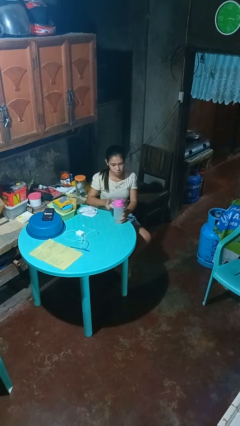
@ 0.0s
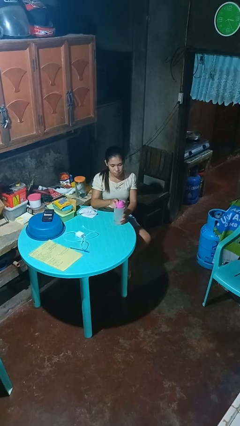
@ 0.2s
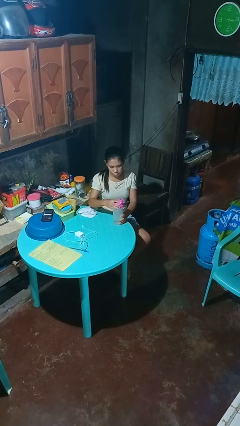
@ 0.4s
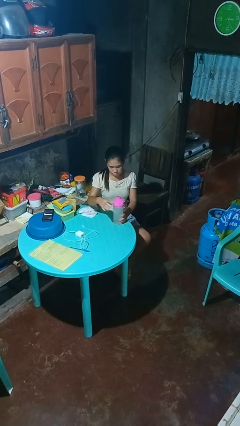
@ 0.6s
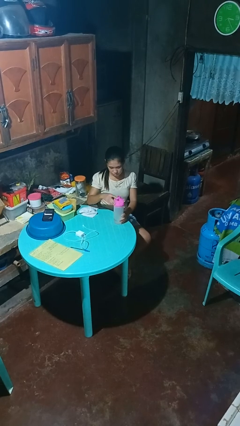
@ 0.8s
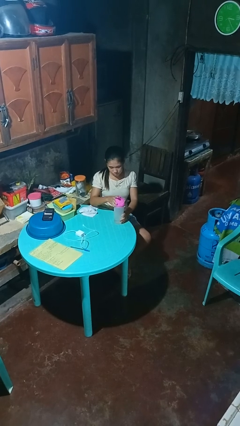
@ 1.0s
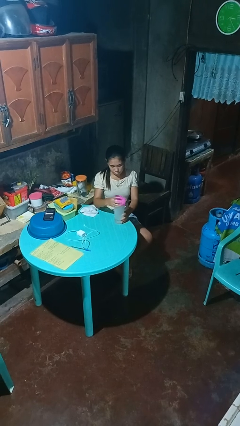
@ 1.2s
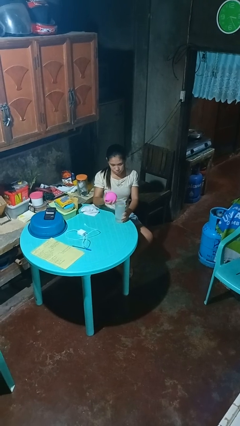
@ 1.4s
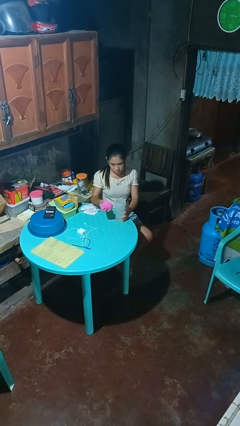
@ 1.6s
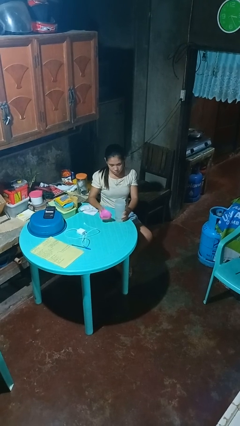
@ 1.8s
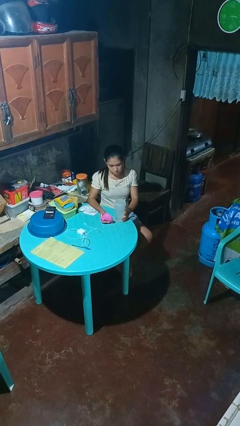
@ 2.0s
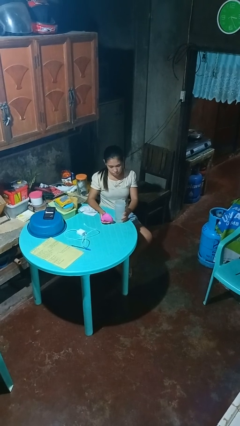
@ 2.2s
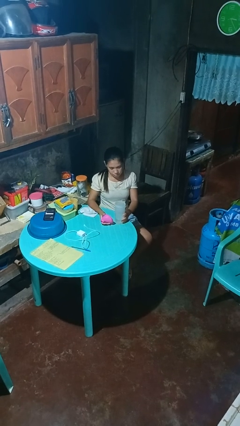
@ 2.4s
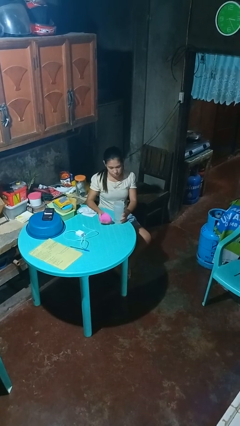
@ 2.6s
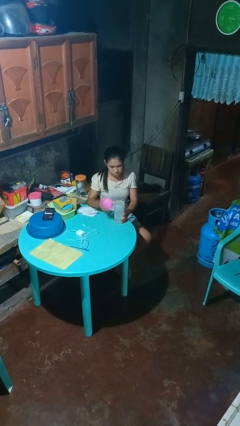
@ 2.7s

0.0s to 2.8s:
person unscrews lid from bottle

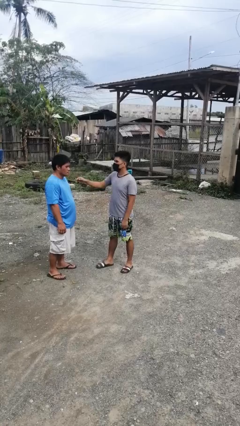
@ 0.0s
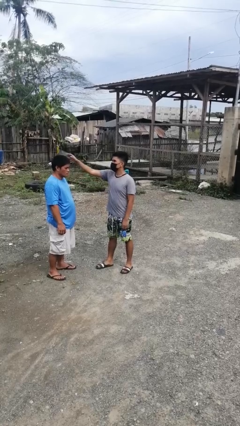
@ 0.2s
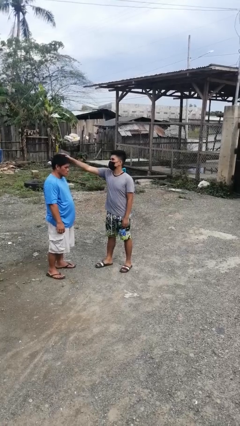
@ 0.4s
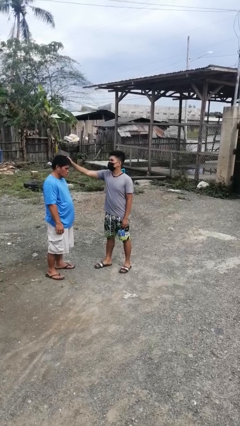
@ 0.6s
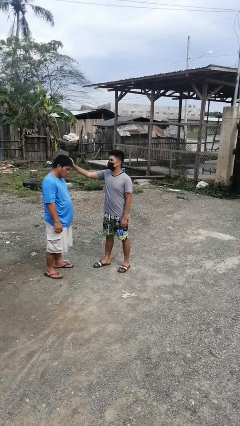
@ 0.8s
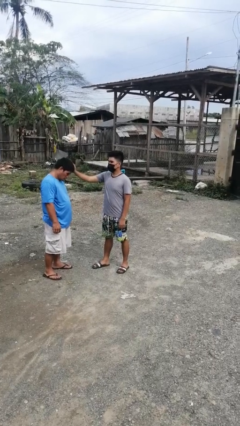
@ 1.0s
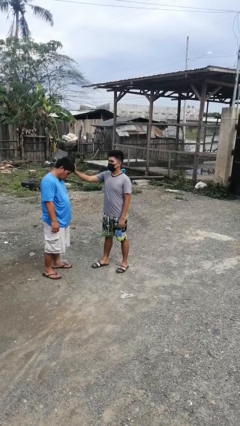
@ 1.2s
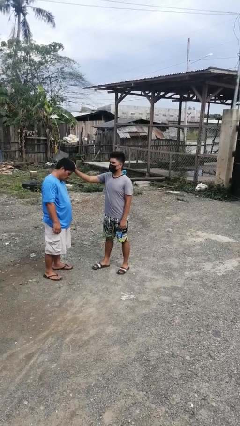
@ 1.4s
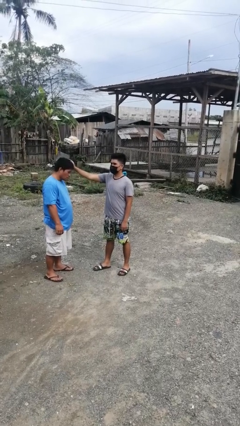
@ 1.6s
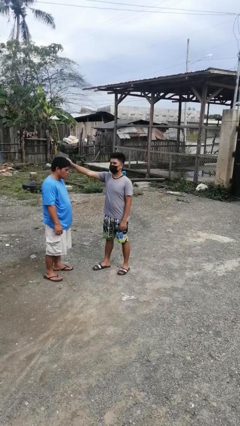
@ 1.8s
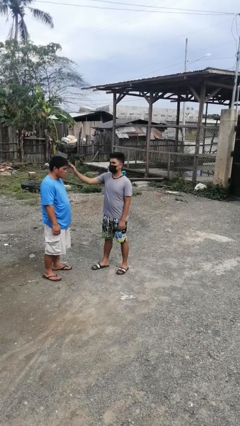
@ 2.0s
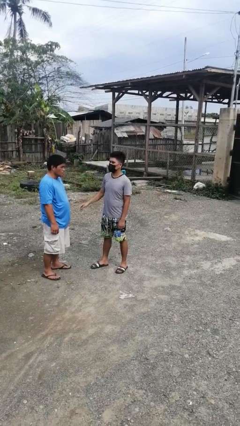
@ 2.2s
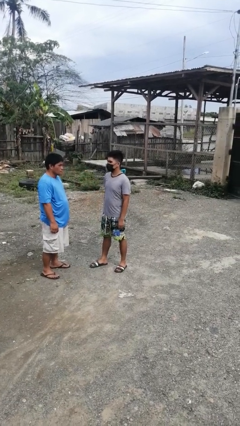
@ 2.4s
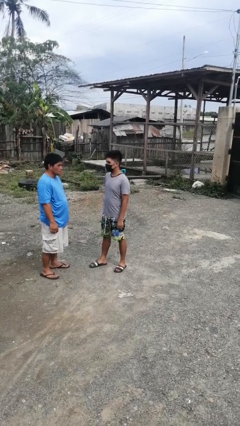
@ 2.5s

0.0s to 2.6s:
person grabs person by hair

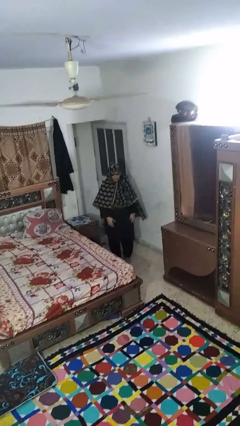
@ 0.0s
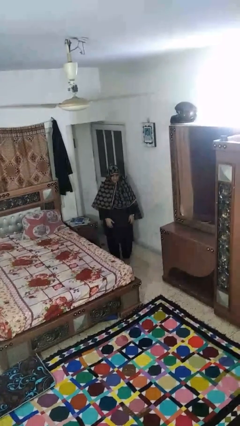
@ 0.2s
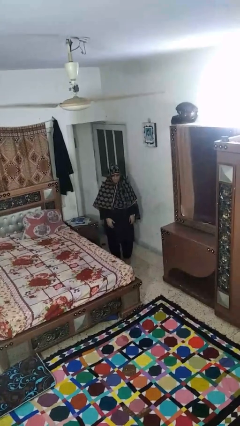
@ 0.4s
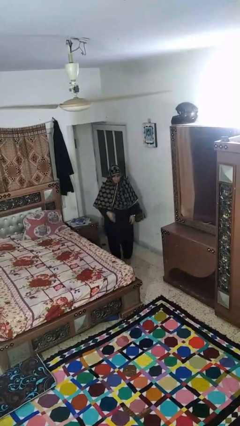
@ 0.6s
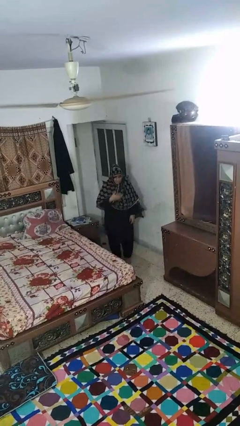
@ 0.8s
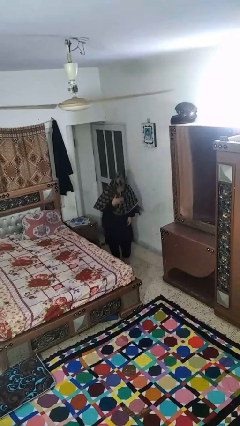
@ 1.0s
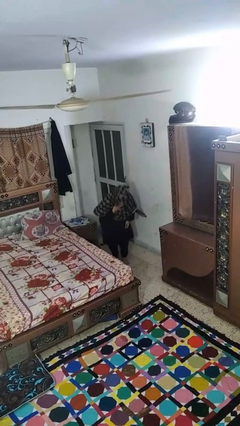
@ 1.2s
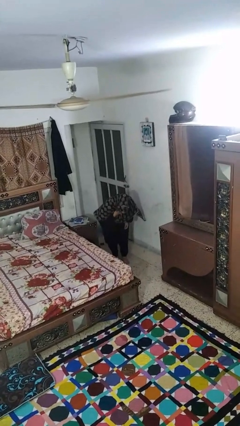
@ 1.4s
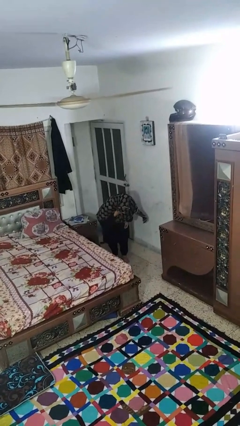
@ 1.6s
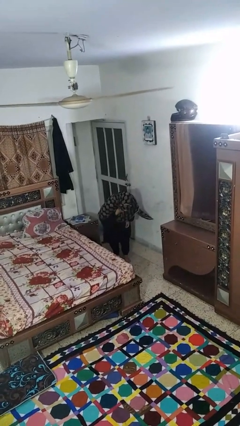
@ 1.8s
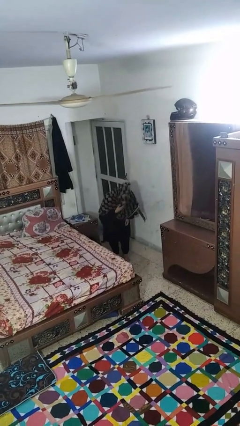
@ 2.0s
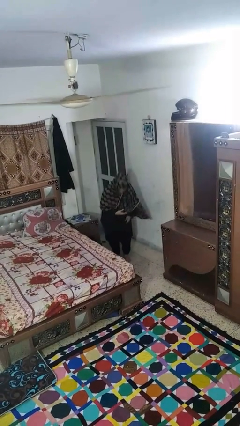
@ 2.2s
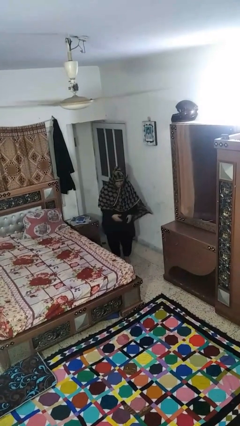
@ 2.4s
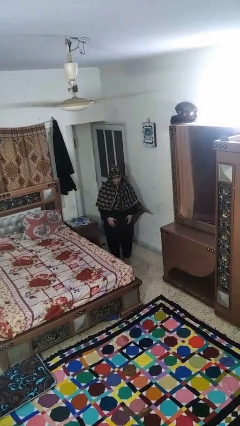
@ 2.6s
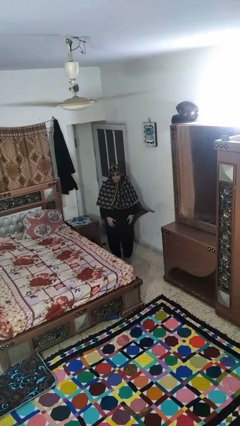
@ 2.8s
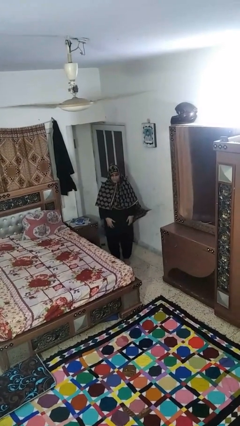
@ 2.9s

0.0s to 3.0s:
person bows

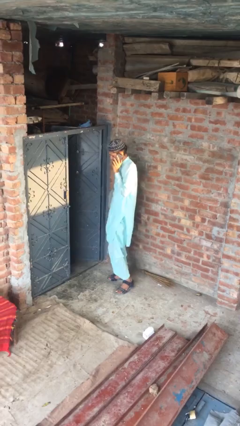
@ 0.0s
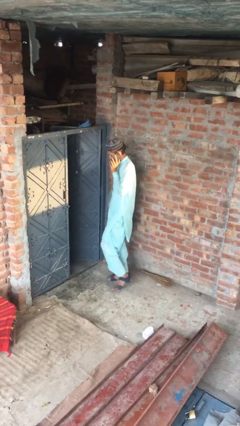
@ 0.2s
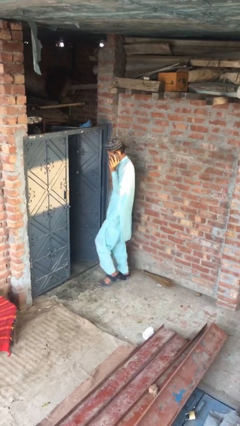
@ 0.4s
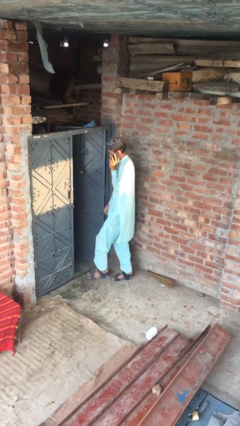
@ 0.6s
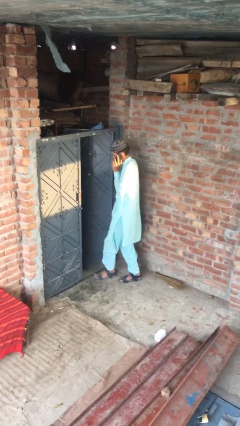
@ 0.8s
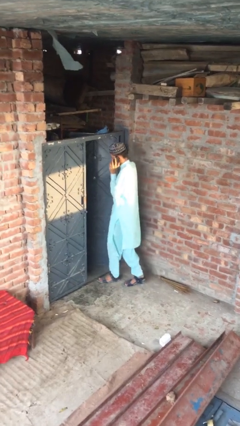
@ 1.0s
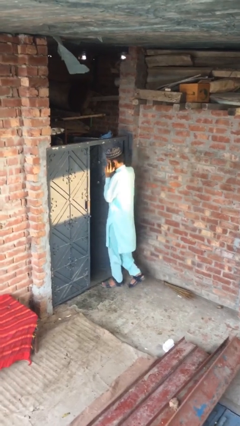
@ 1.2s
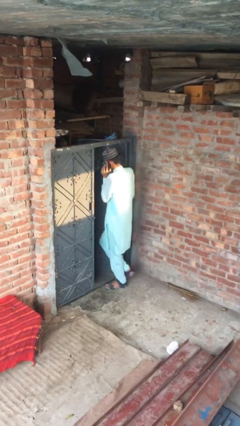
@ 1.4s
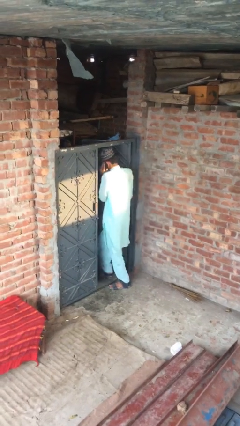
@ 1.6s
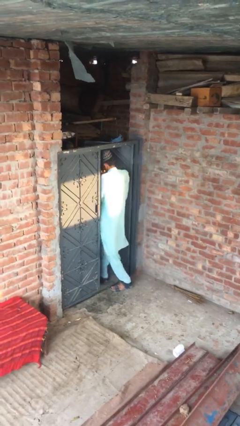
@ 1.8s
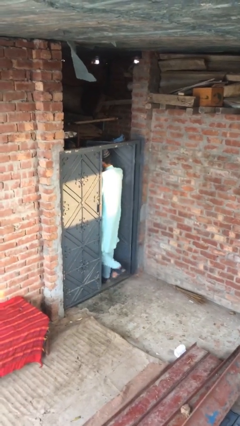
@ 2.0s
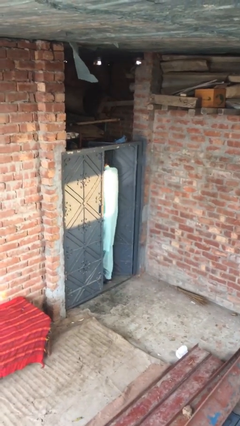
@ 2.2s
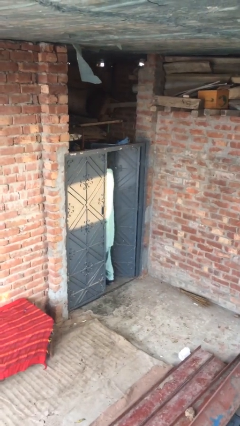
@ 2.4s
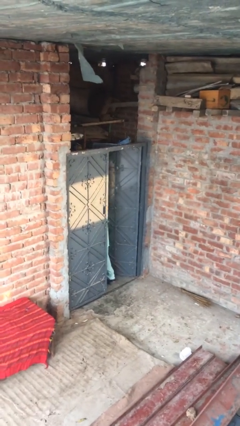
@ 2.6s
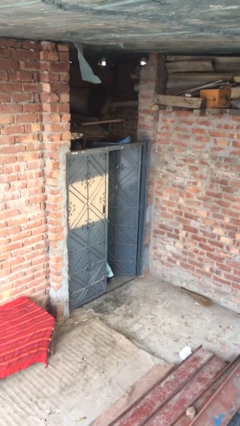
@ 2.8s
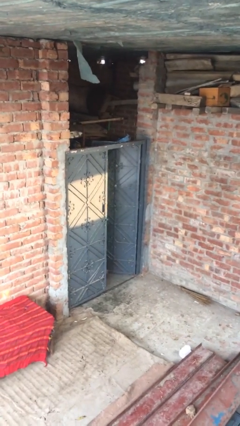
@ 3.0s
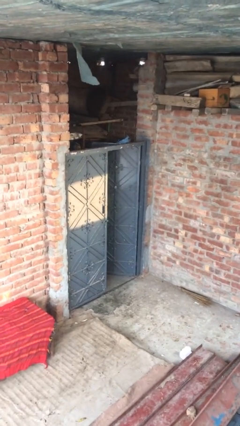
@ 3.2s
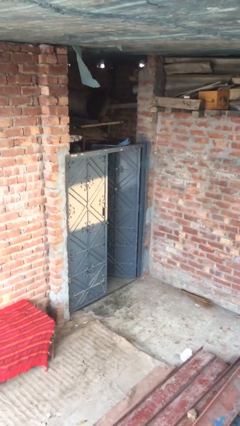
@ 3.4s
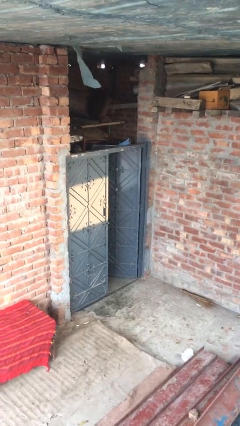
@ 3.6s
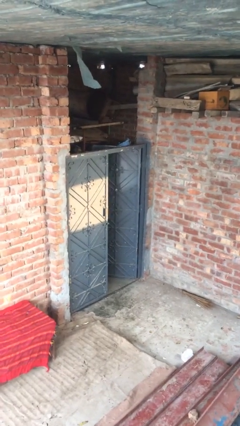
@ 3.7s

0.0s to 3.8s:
person exits scene through structure

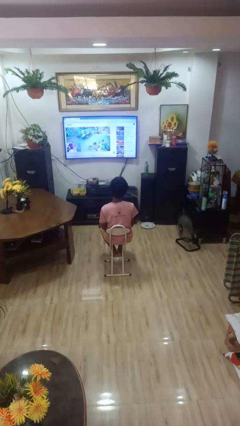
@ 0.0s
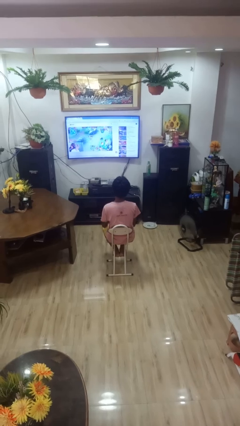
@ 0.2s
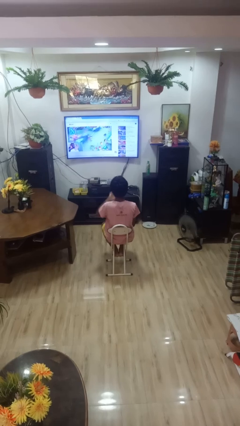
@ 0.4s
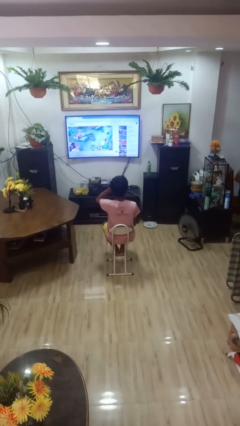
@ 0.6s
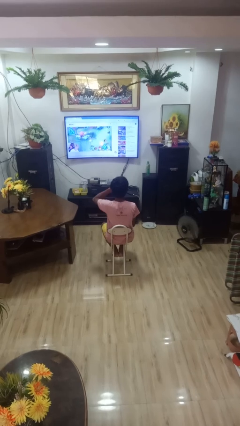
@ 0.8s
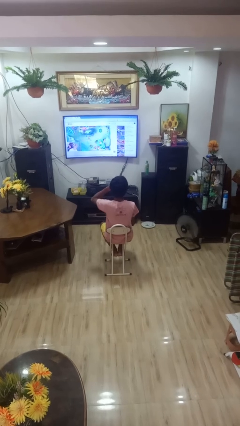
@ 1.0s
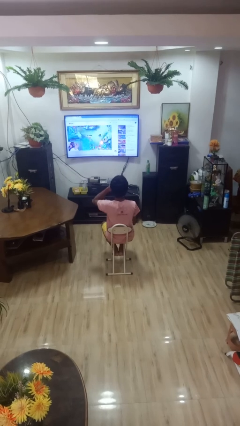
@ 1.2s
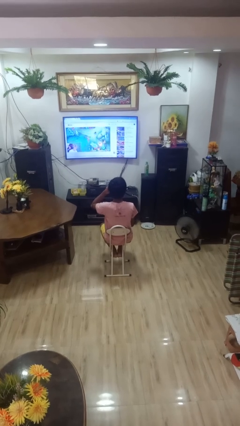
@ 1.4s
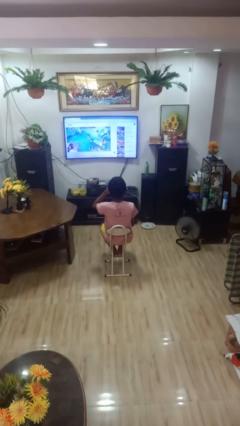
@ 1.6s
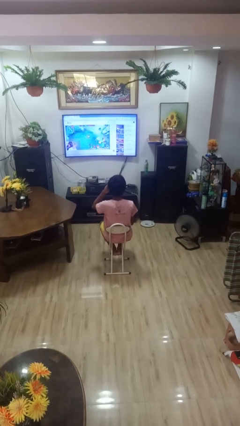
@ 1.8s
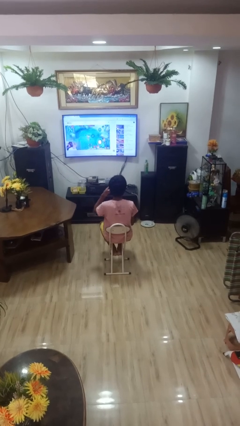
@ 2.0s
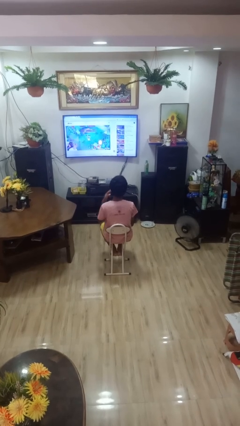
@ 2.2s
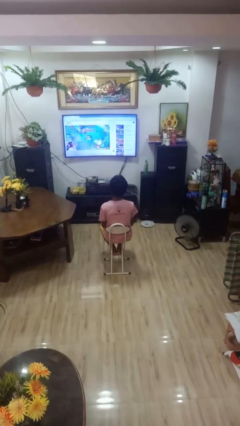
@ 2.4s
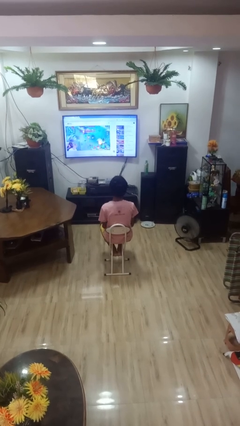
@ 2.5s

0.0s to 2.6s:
person rubs eyes

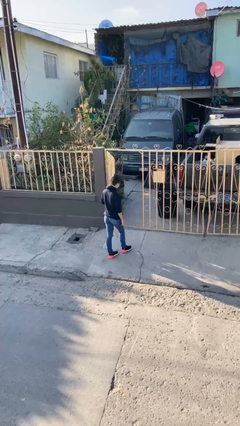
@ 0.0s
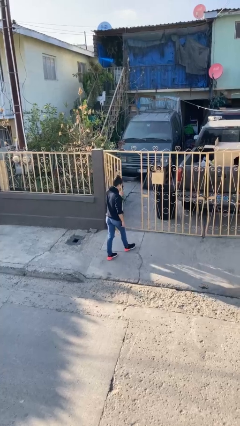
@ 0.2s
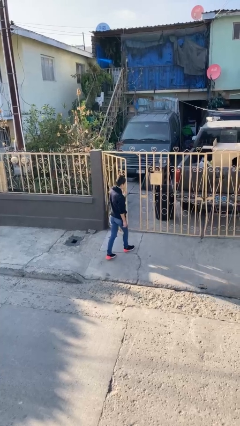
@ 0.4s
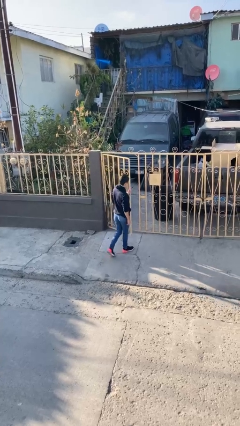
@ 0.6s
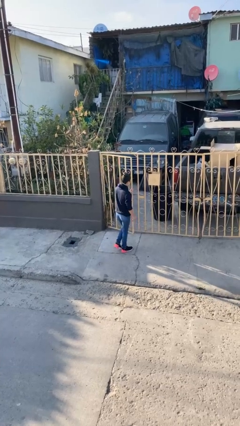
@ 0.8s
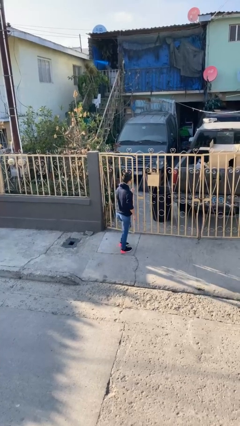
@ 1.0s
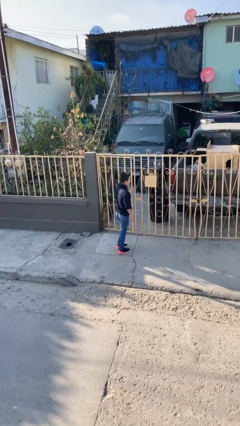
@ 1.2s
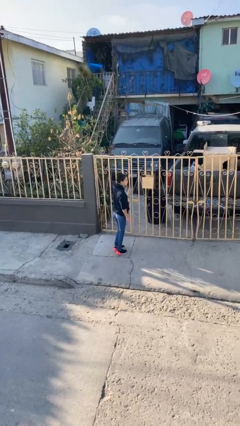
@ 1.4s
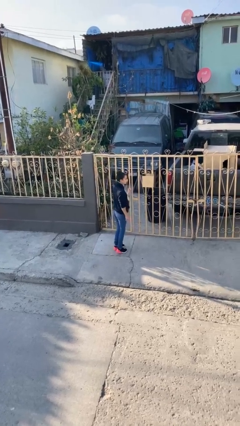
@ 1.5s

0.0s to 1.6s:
person closes facility door

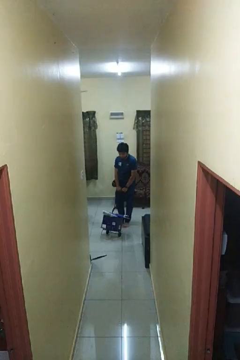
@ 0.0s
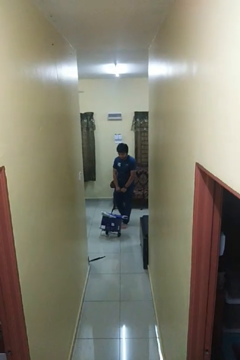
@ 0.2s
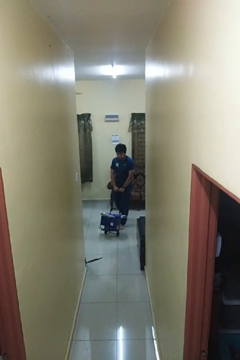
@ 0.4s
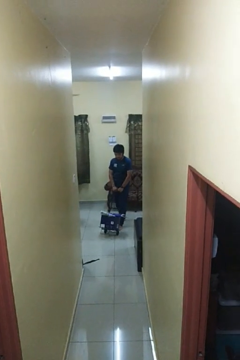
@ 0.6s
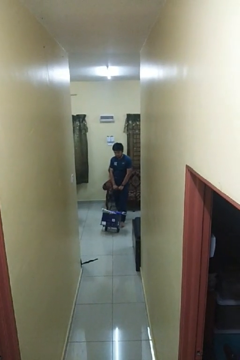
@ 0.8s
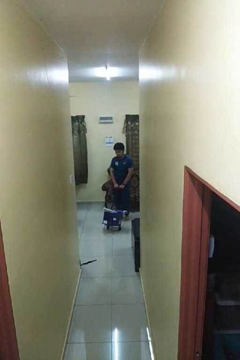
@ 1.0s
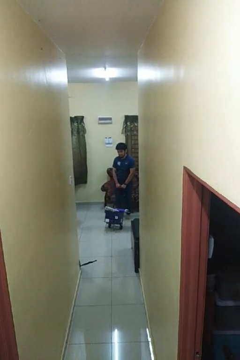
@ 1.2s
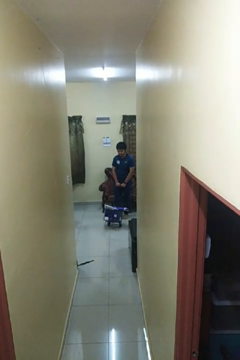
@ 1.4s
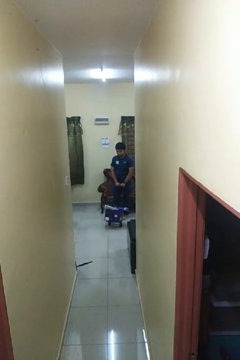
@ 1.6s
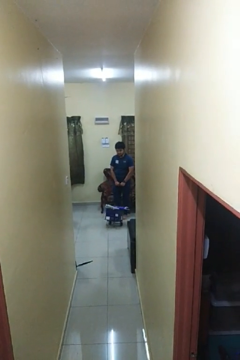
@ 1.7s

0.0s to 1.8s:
person pulls wheeled cart
